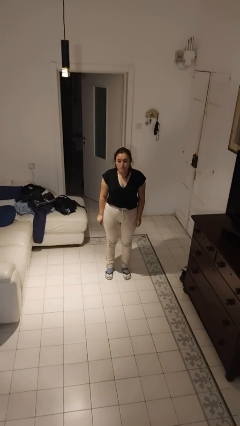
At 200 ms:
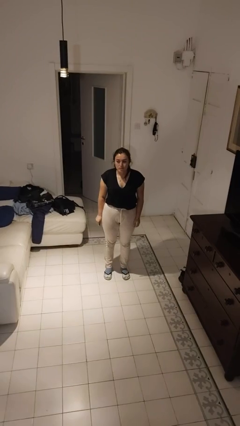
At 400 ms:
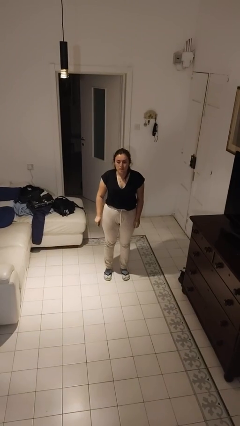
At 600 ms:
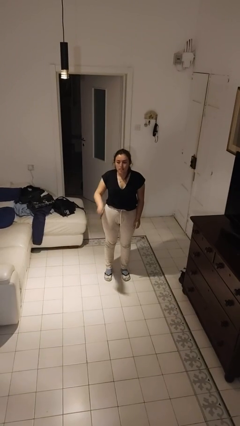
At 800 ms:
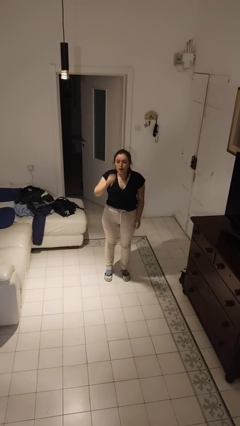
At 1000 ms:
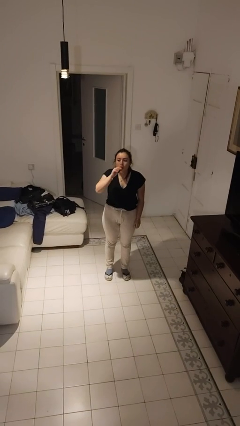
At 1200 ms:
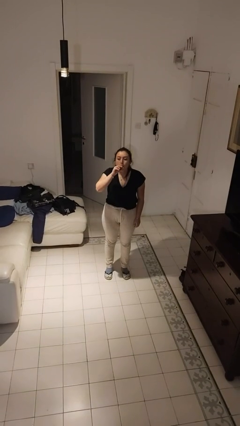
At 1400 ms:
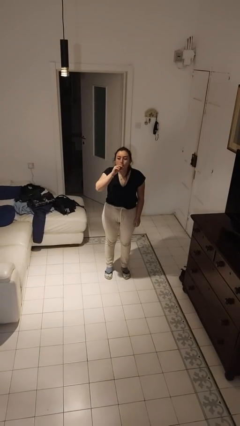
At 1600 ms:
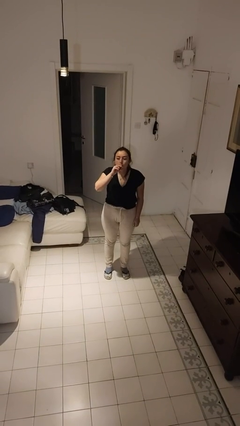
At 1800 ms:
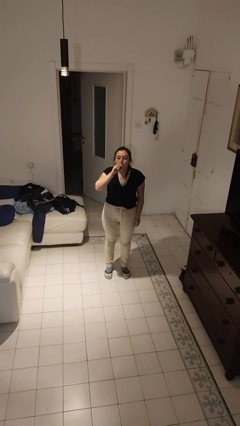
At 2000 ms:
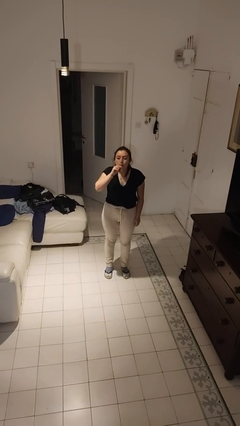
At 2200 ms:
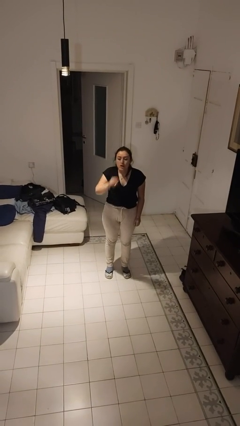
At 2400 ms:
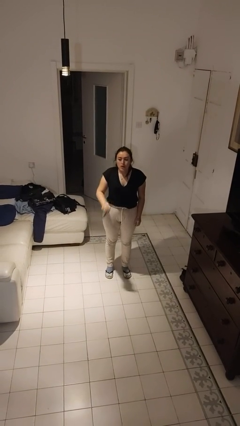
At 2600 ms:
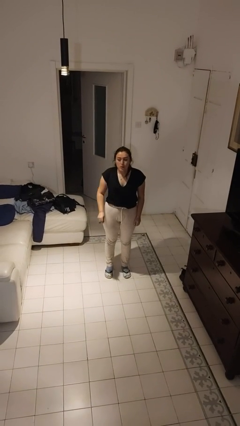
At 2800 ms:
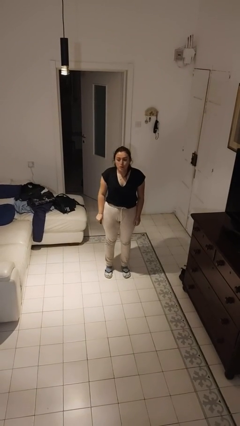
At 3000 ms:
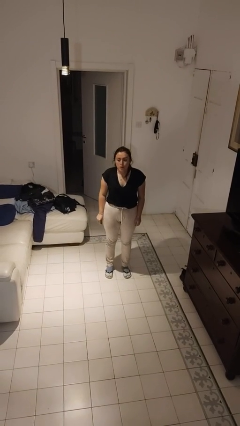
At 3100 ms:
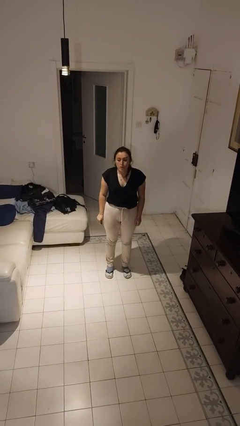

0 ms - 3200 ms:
person vapes

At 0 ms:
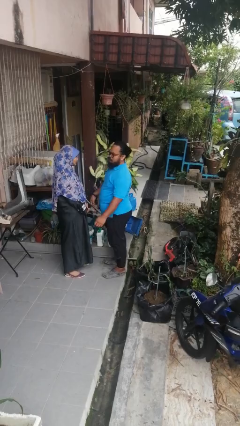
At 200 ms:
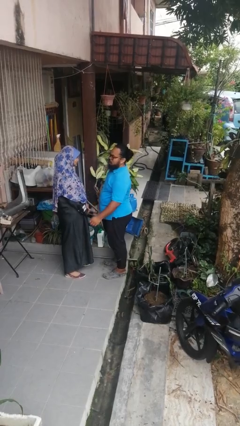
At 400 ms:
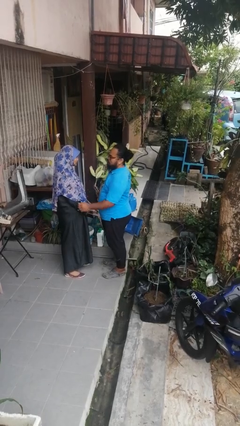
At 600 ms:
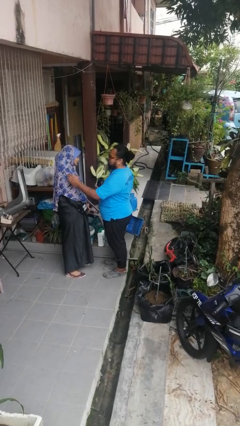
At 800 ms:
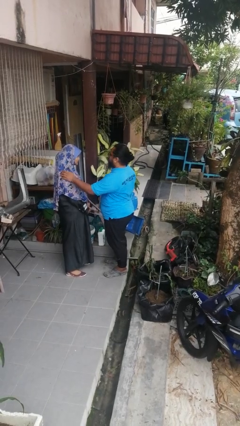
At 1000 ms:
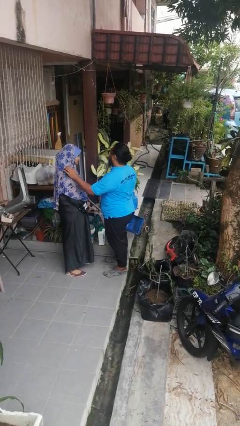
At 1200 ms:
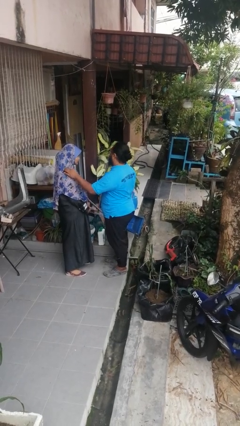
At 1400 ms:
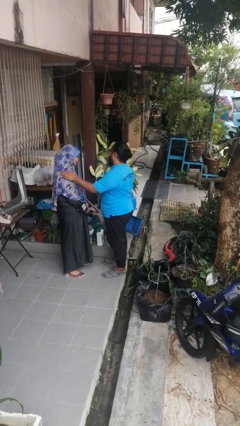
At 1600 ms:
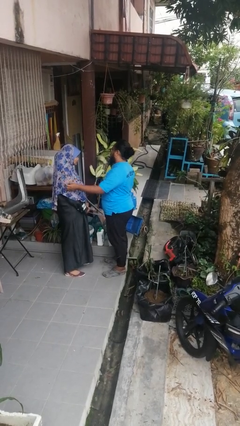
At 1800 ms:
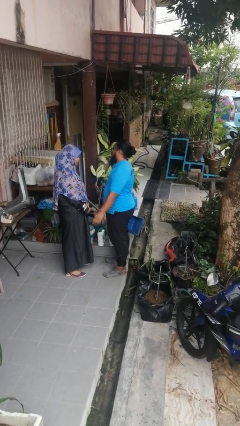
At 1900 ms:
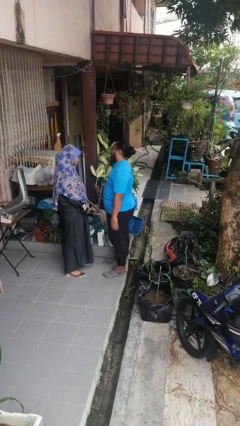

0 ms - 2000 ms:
person pounds shoulders of person

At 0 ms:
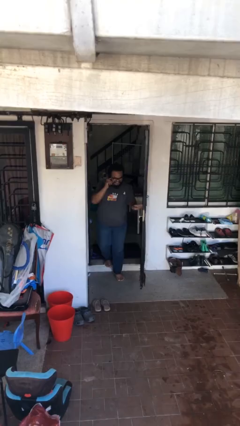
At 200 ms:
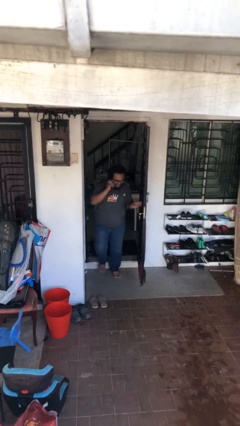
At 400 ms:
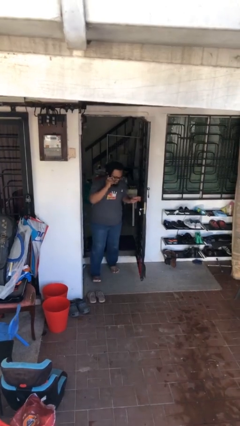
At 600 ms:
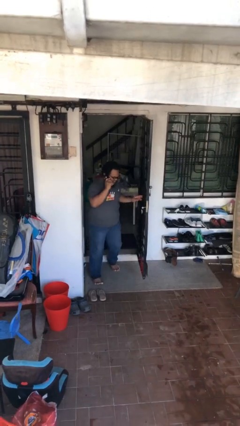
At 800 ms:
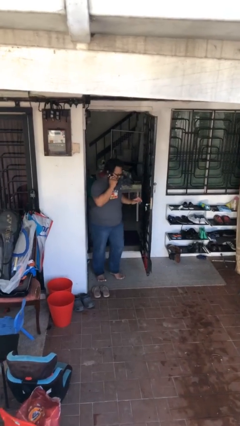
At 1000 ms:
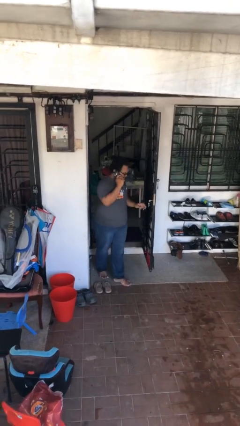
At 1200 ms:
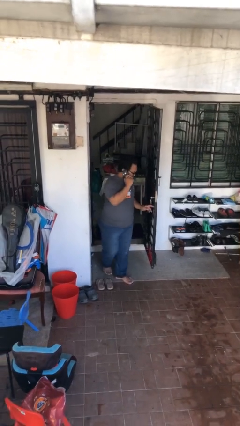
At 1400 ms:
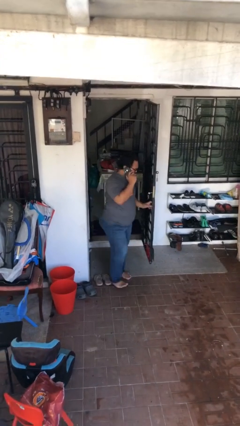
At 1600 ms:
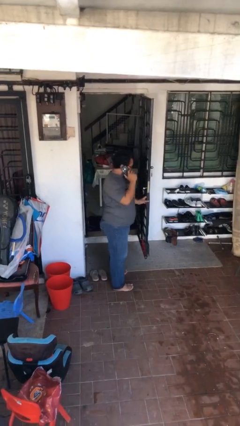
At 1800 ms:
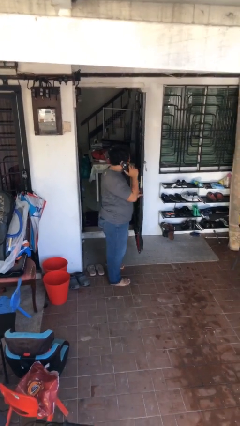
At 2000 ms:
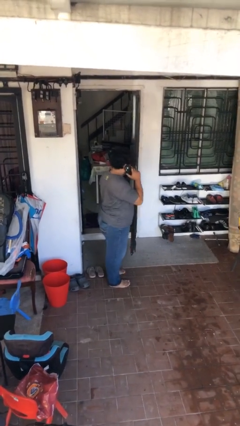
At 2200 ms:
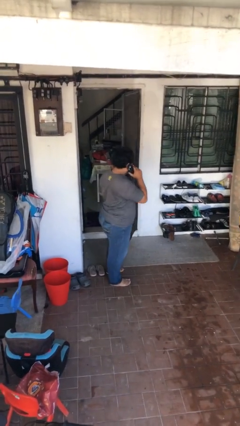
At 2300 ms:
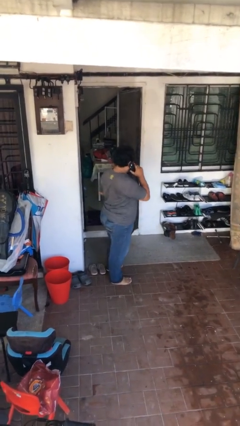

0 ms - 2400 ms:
person enters scene through structure

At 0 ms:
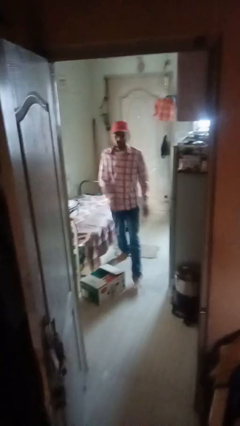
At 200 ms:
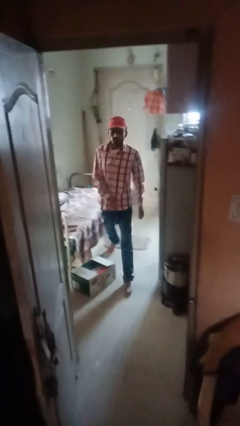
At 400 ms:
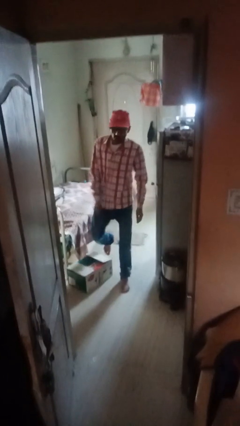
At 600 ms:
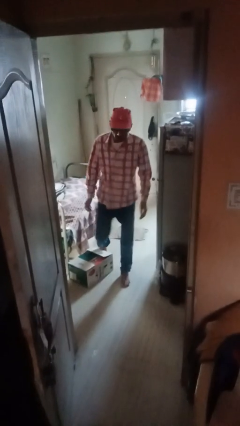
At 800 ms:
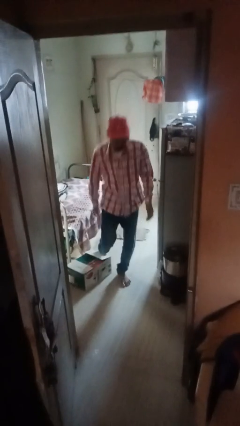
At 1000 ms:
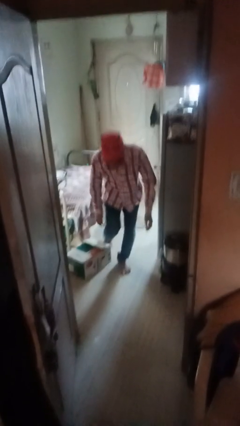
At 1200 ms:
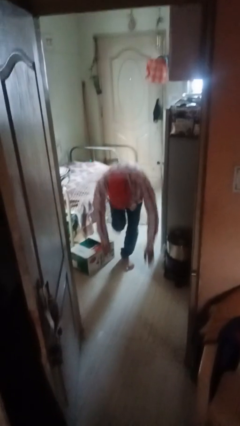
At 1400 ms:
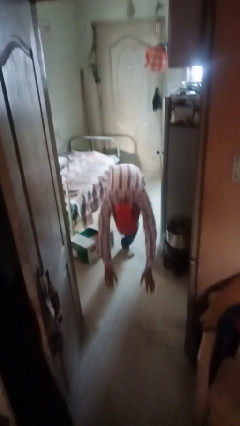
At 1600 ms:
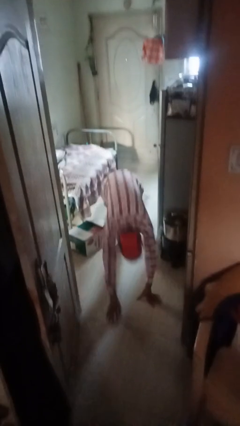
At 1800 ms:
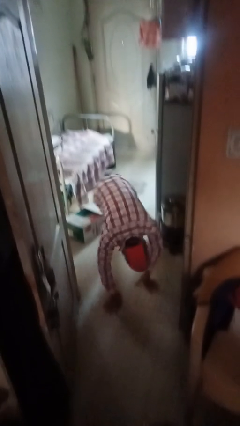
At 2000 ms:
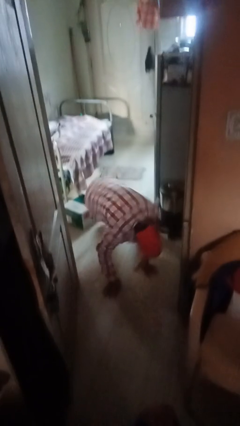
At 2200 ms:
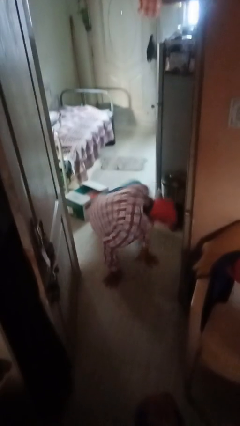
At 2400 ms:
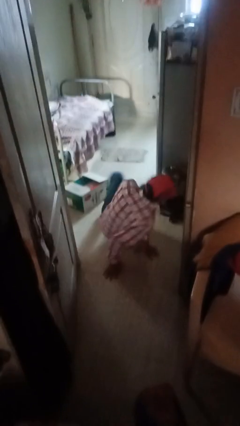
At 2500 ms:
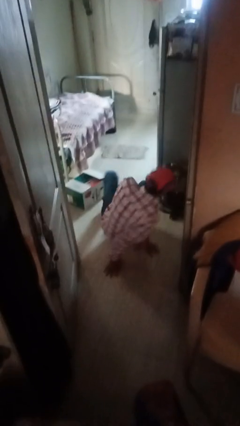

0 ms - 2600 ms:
person trips on object on floor

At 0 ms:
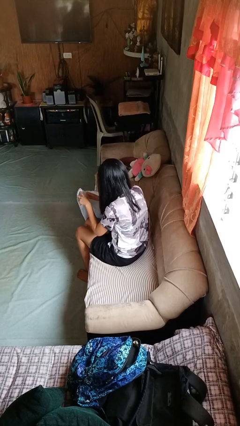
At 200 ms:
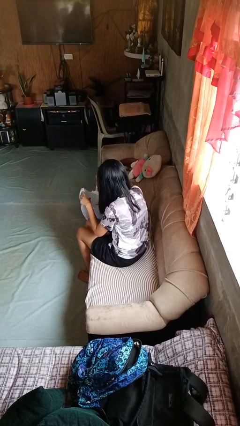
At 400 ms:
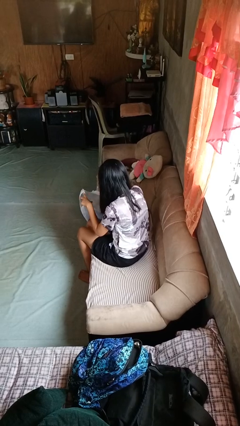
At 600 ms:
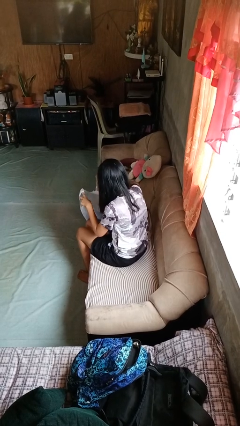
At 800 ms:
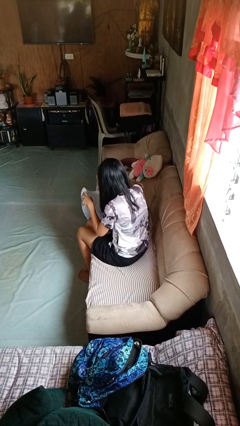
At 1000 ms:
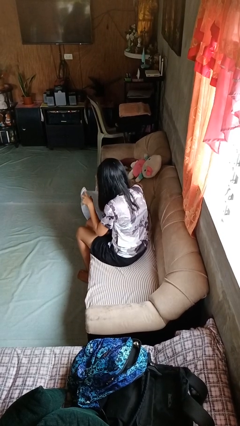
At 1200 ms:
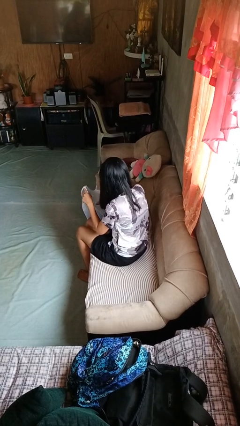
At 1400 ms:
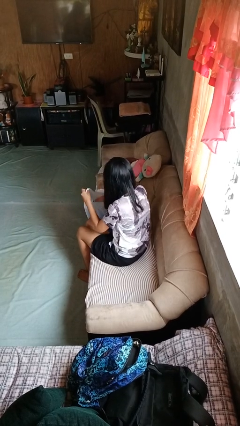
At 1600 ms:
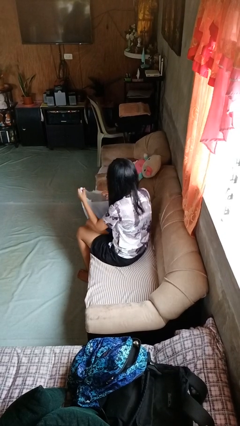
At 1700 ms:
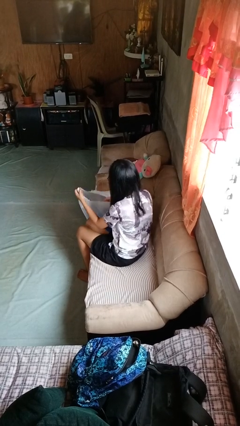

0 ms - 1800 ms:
person searches in bag

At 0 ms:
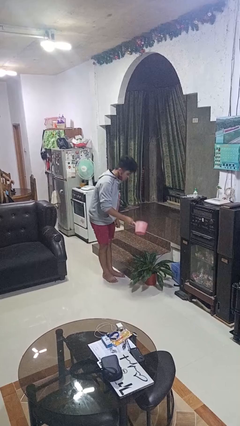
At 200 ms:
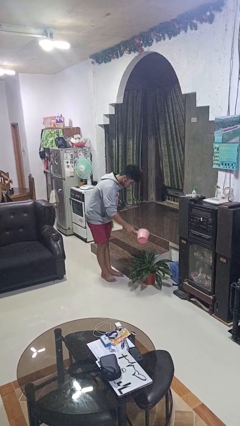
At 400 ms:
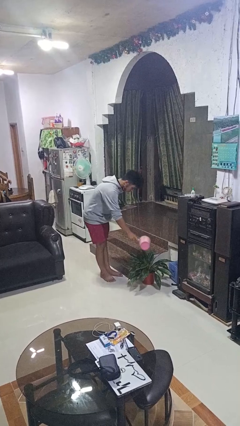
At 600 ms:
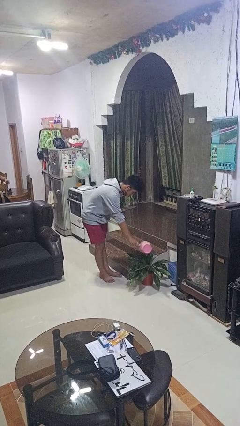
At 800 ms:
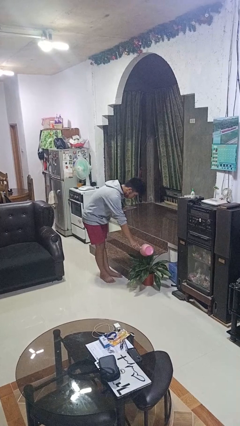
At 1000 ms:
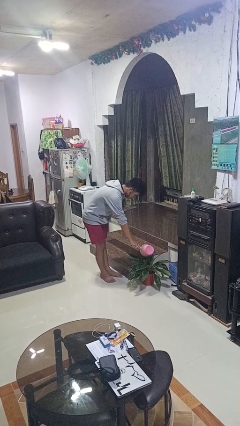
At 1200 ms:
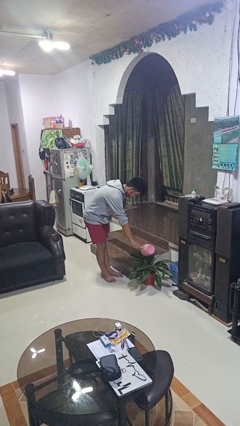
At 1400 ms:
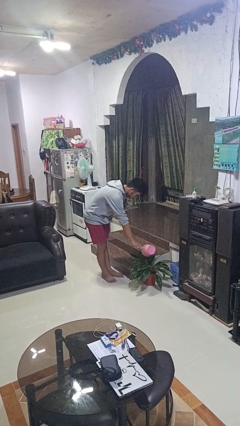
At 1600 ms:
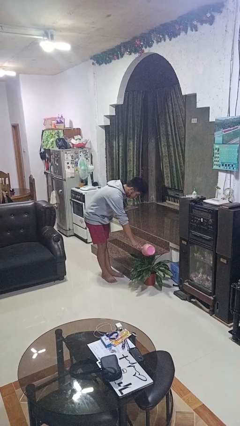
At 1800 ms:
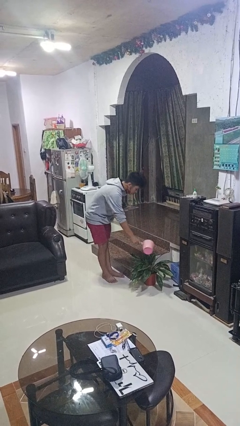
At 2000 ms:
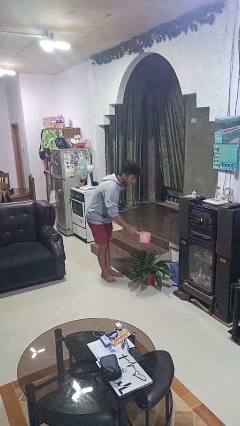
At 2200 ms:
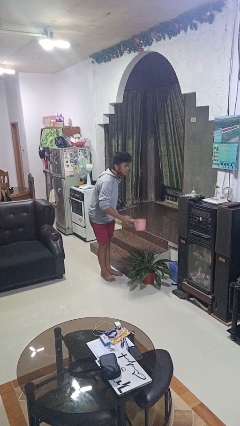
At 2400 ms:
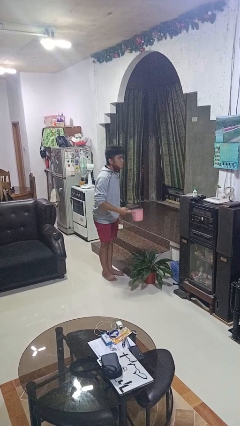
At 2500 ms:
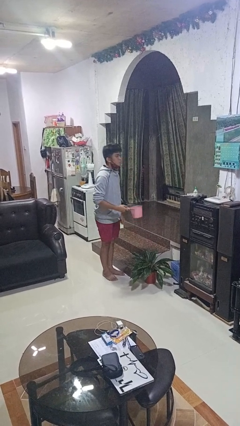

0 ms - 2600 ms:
person waters houseplant

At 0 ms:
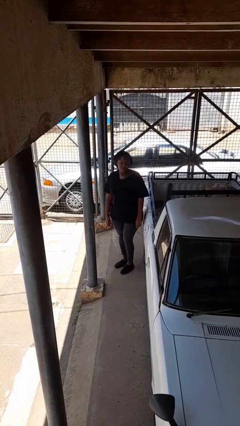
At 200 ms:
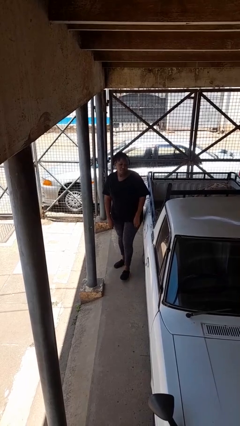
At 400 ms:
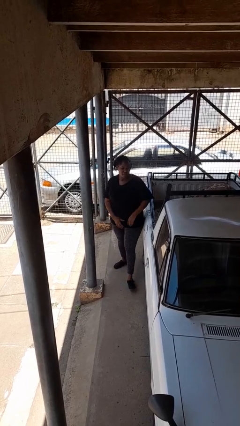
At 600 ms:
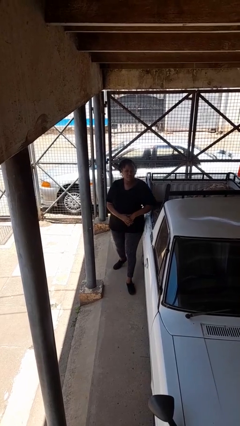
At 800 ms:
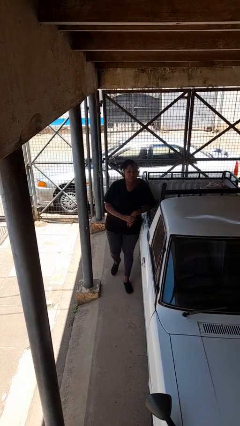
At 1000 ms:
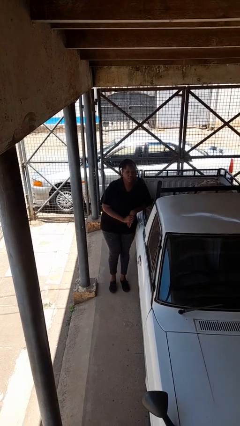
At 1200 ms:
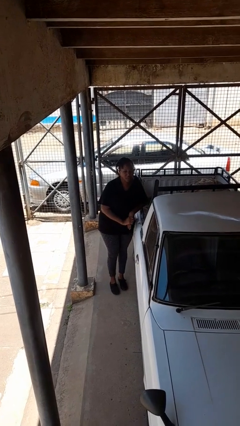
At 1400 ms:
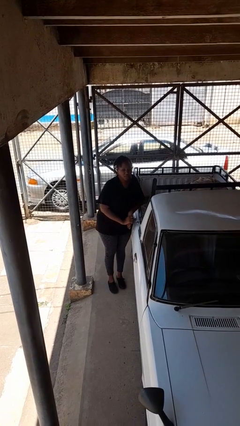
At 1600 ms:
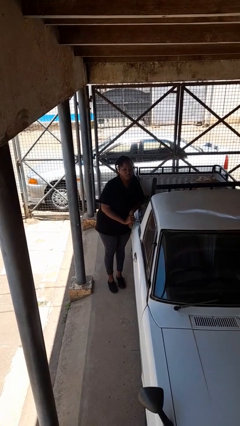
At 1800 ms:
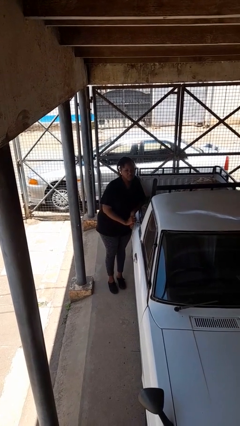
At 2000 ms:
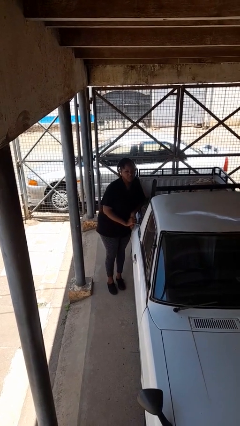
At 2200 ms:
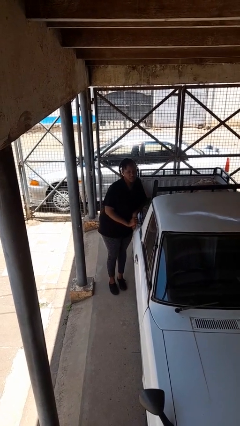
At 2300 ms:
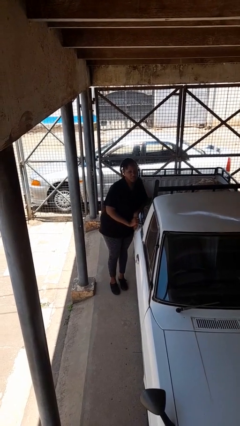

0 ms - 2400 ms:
person leans against car
